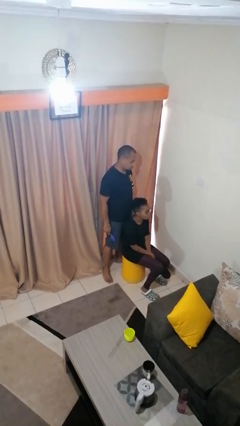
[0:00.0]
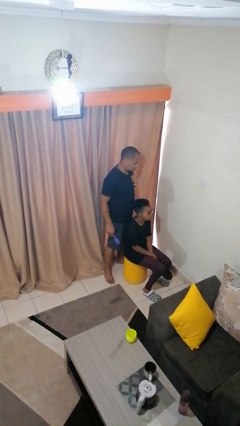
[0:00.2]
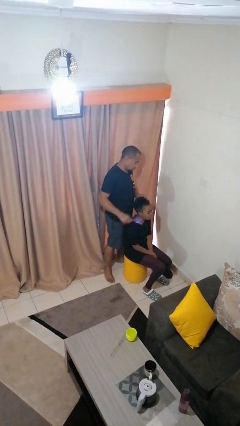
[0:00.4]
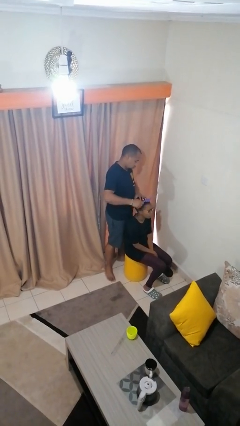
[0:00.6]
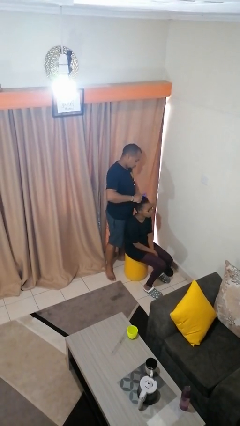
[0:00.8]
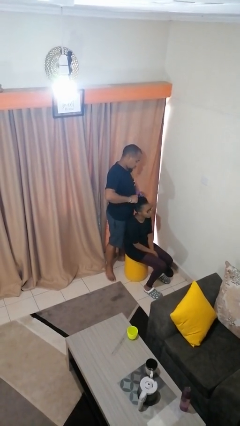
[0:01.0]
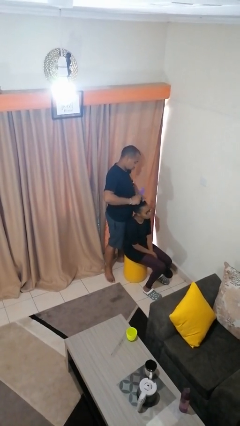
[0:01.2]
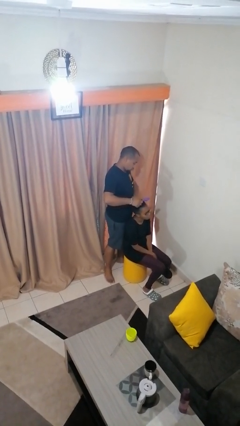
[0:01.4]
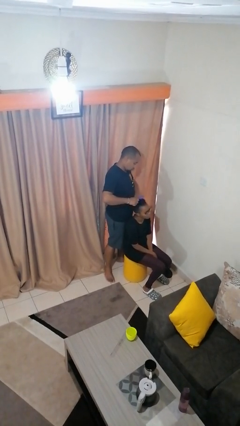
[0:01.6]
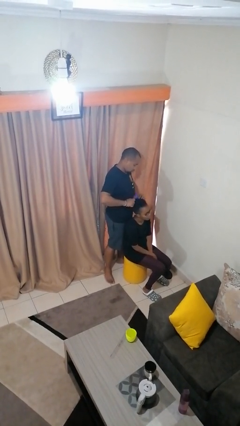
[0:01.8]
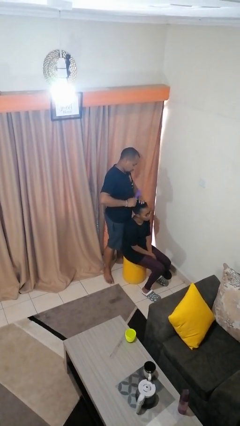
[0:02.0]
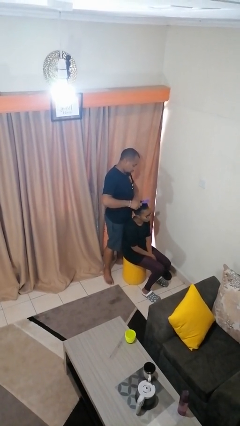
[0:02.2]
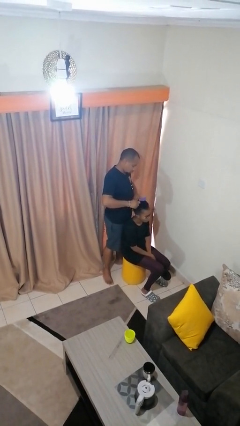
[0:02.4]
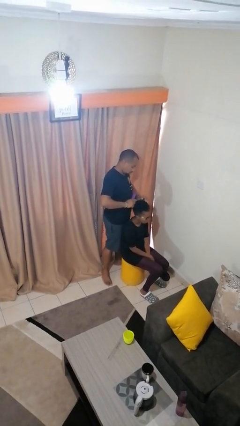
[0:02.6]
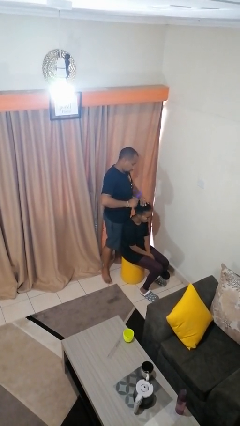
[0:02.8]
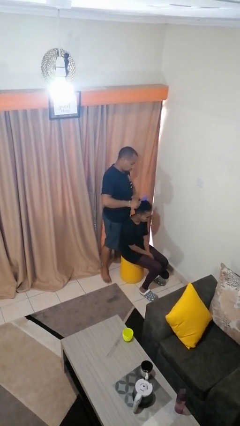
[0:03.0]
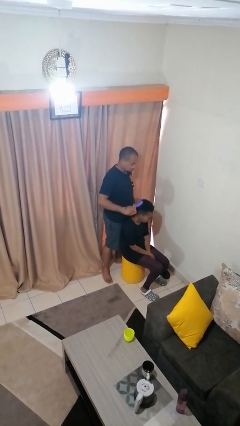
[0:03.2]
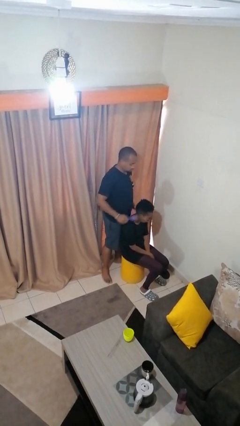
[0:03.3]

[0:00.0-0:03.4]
person brushes hair of person

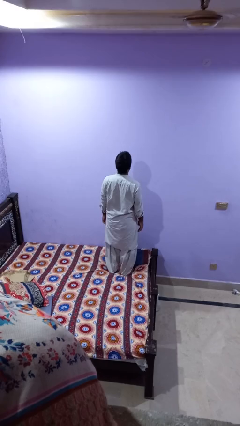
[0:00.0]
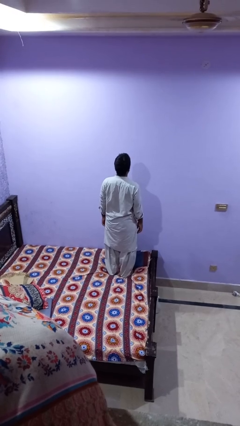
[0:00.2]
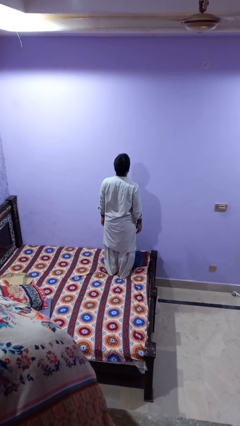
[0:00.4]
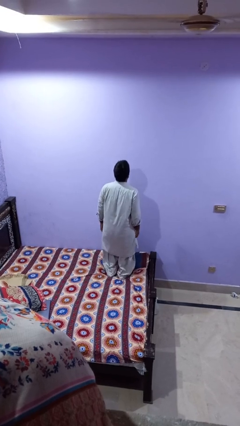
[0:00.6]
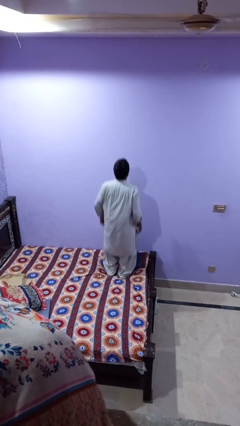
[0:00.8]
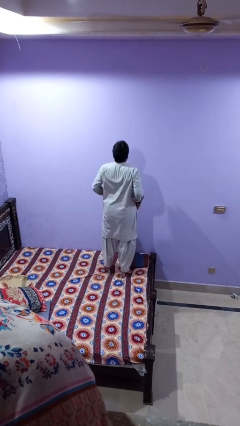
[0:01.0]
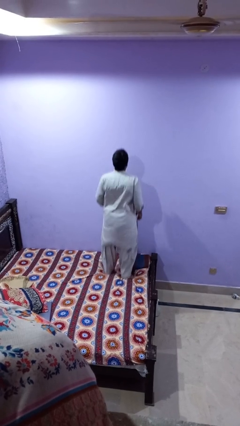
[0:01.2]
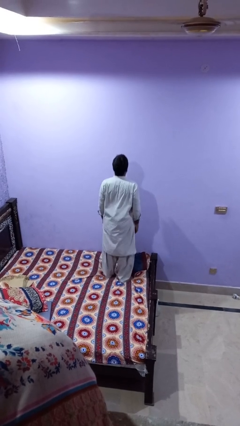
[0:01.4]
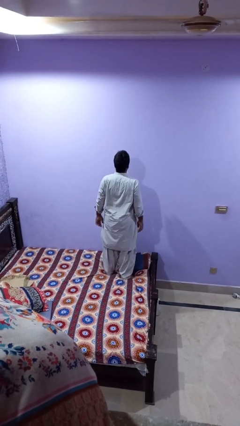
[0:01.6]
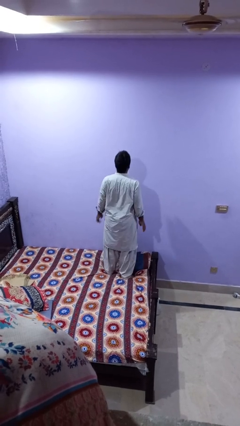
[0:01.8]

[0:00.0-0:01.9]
person jumps on bed

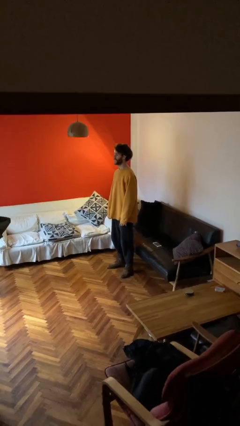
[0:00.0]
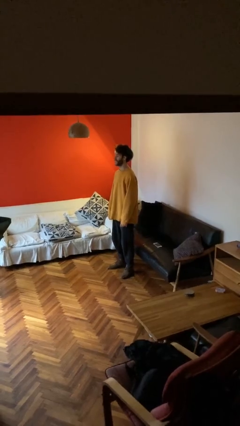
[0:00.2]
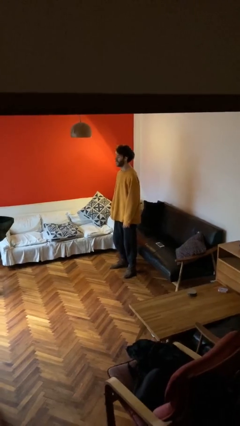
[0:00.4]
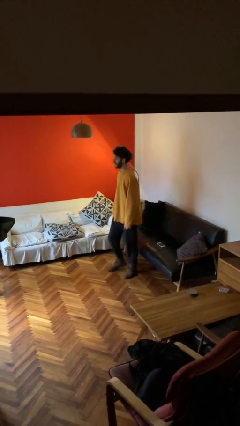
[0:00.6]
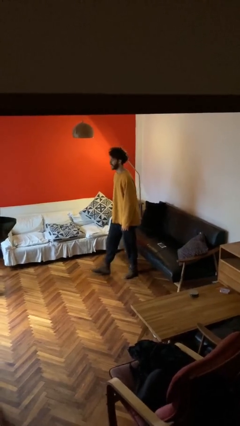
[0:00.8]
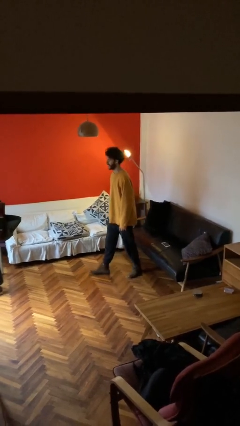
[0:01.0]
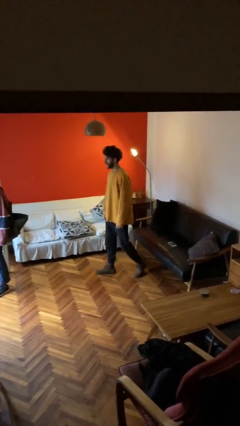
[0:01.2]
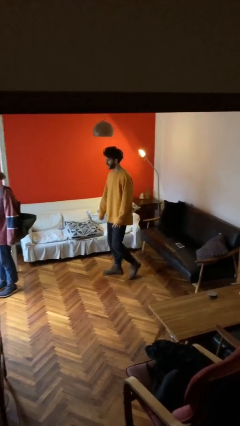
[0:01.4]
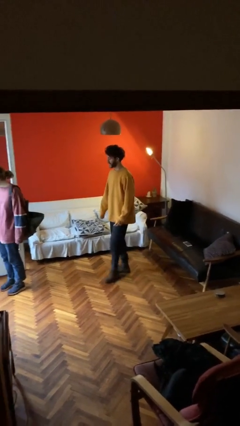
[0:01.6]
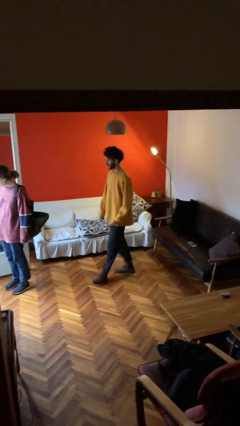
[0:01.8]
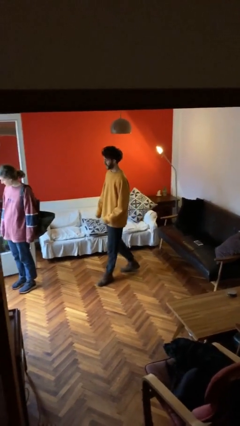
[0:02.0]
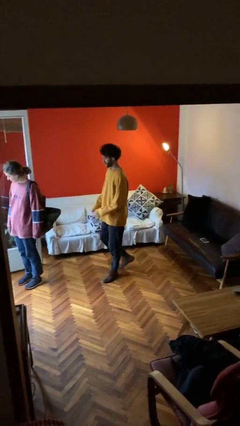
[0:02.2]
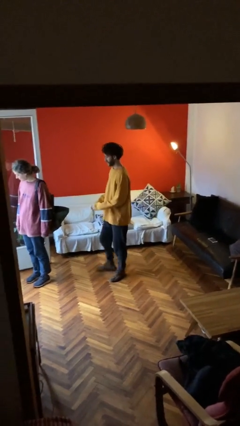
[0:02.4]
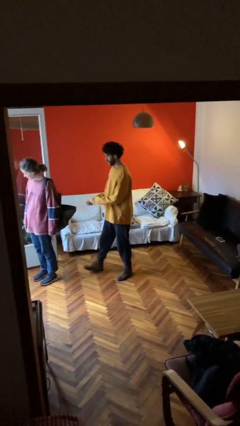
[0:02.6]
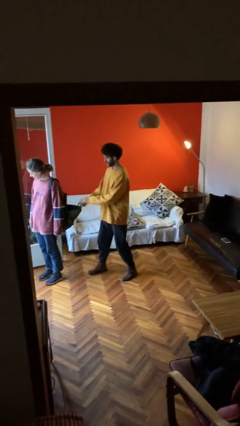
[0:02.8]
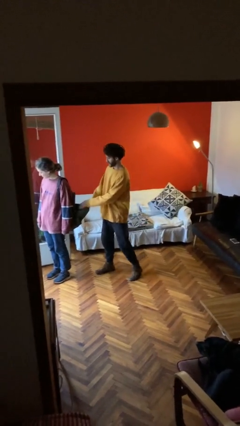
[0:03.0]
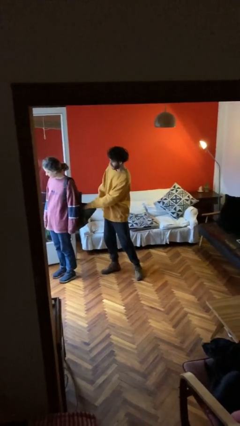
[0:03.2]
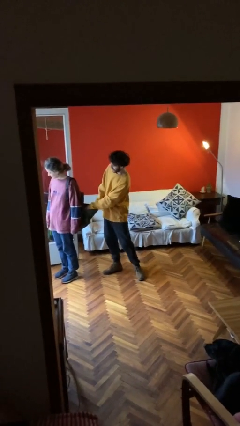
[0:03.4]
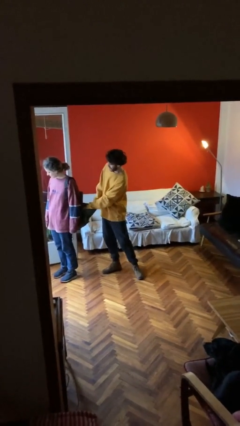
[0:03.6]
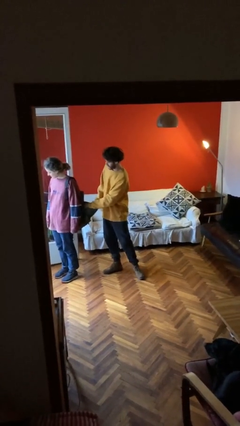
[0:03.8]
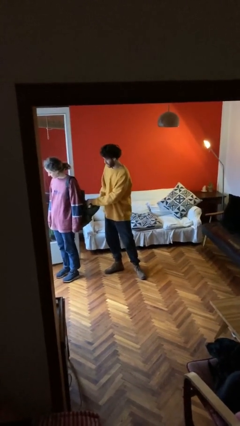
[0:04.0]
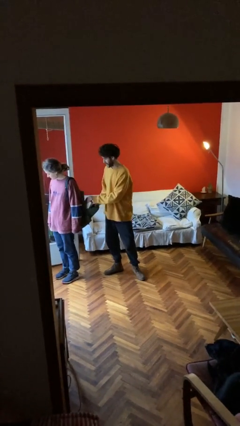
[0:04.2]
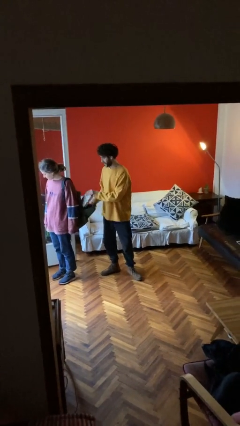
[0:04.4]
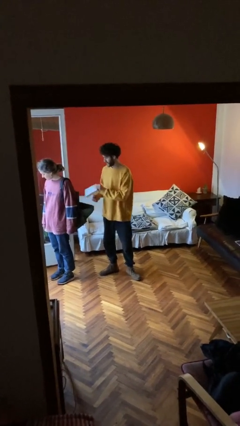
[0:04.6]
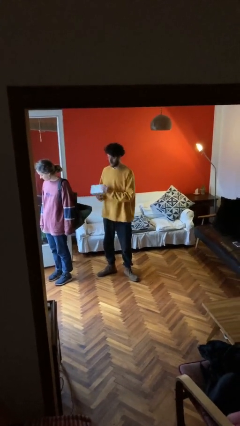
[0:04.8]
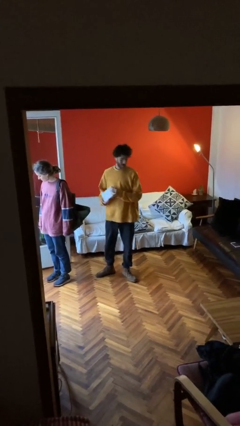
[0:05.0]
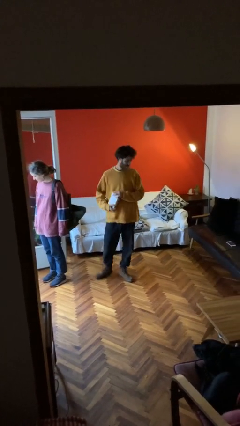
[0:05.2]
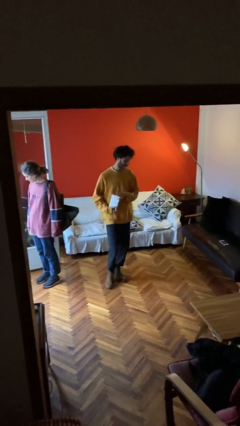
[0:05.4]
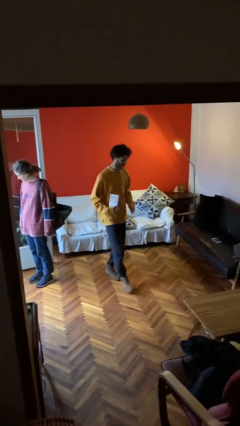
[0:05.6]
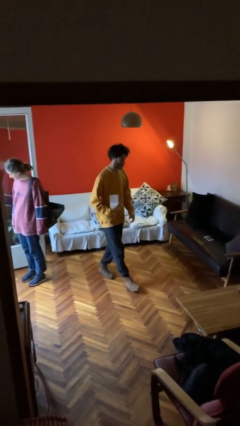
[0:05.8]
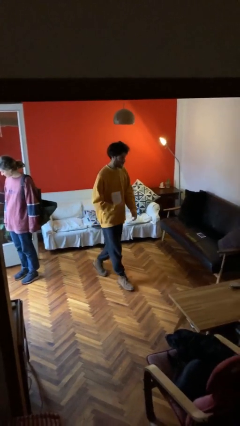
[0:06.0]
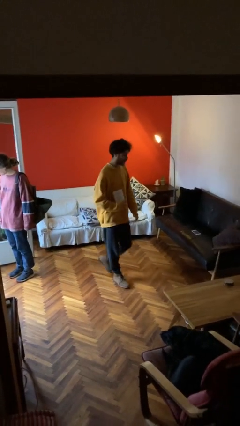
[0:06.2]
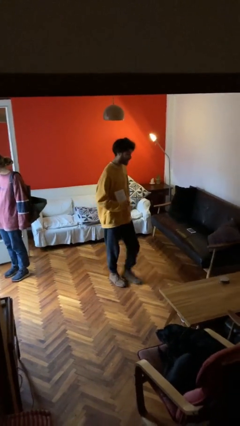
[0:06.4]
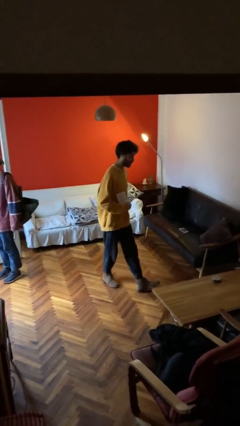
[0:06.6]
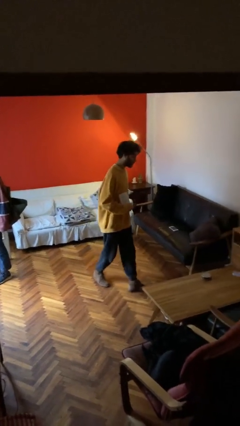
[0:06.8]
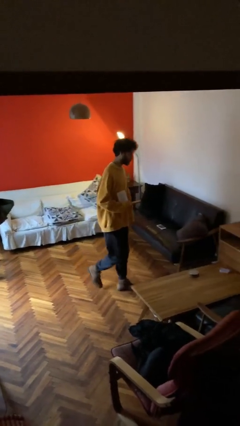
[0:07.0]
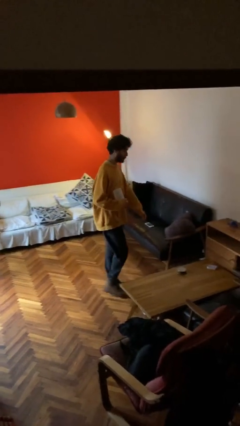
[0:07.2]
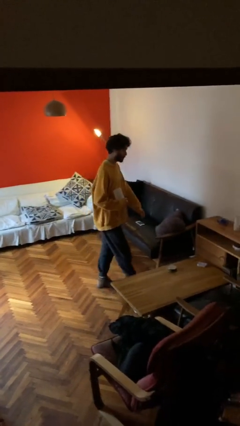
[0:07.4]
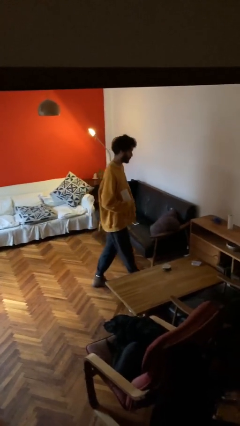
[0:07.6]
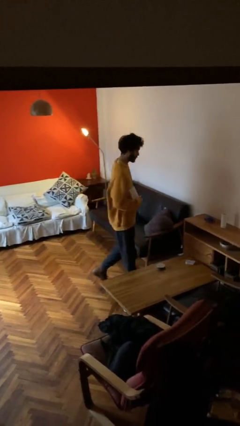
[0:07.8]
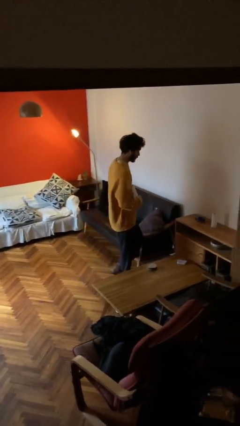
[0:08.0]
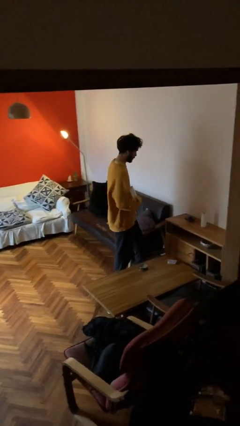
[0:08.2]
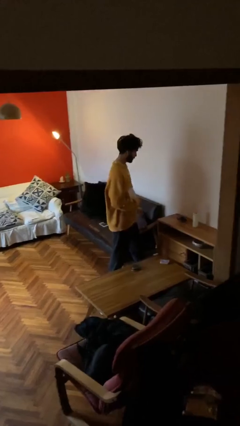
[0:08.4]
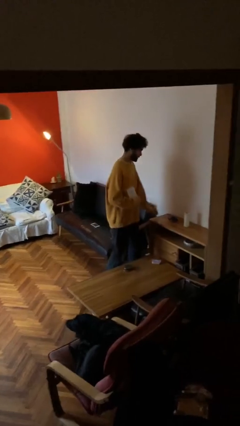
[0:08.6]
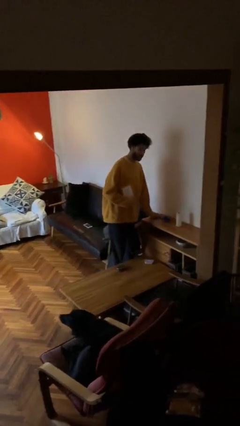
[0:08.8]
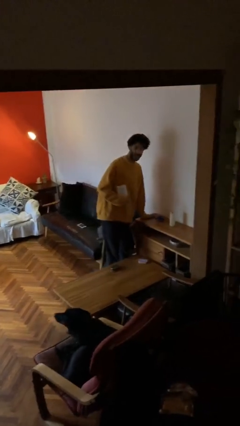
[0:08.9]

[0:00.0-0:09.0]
person steals object from person

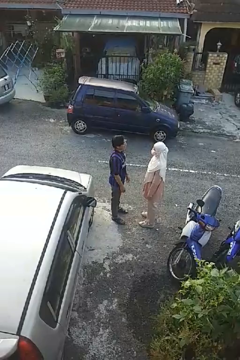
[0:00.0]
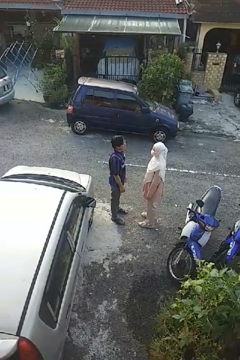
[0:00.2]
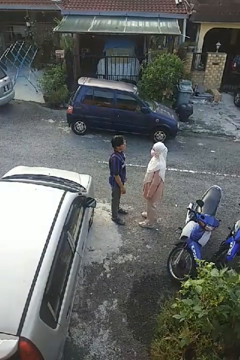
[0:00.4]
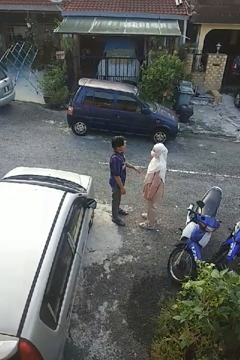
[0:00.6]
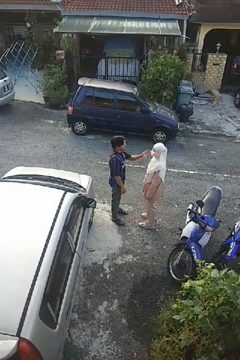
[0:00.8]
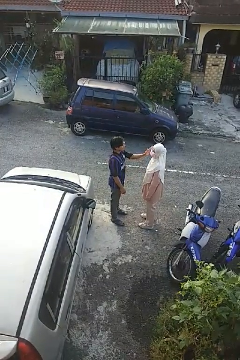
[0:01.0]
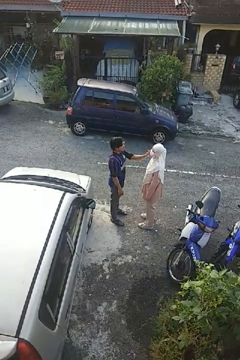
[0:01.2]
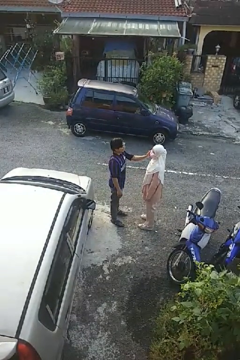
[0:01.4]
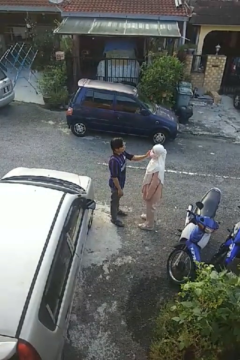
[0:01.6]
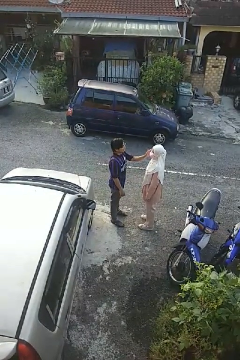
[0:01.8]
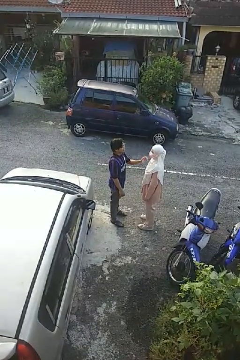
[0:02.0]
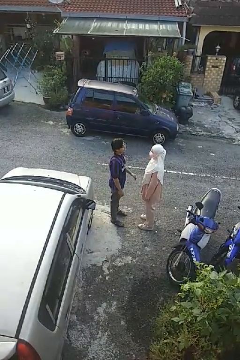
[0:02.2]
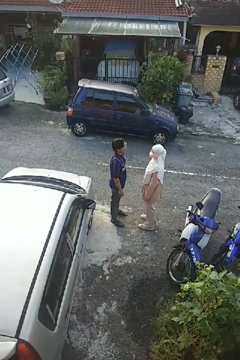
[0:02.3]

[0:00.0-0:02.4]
person touches face of person

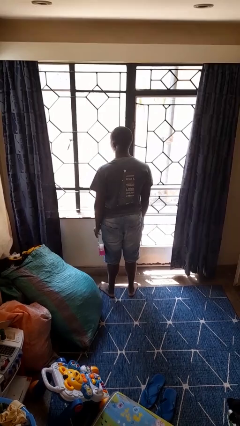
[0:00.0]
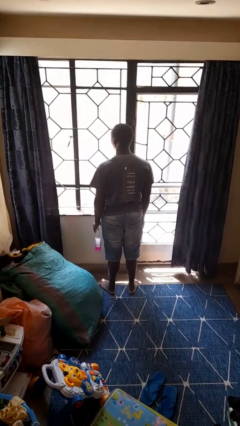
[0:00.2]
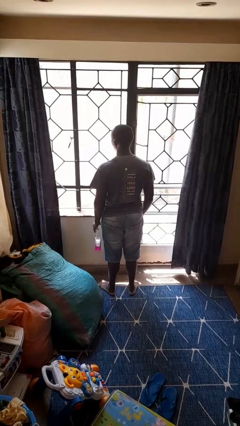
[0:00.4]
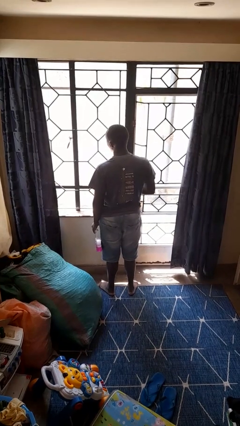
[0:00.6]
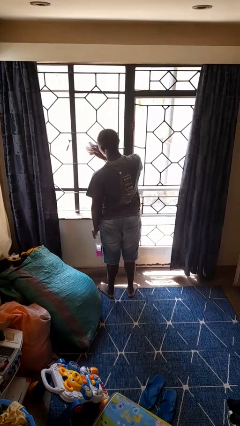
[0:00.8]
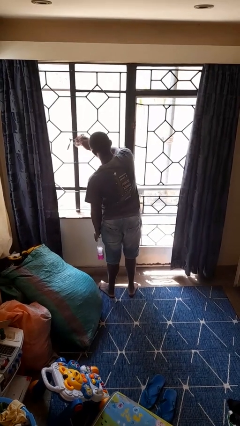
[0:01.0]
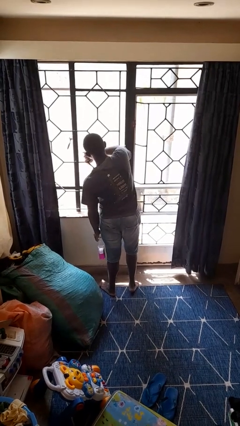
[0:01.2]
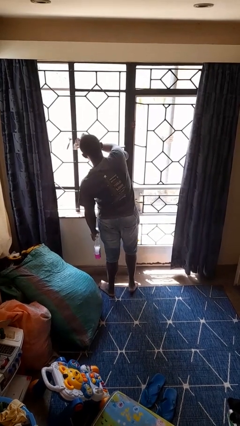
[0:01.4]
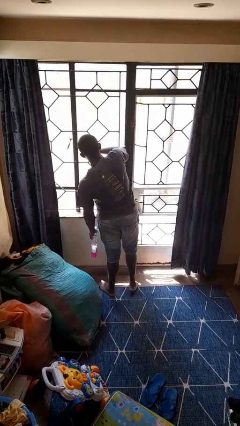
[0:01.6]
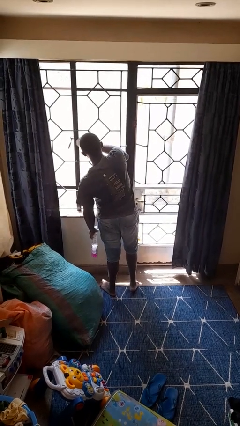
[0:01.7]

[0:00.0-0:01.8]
person washes window
